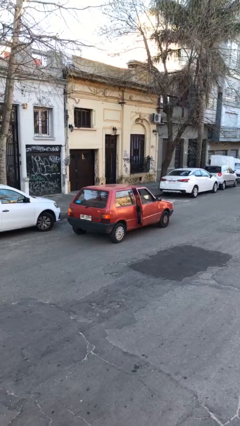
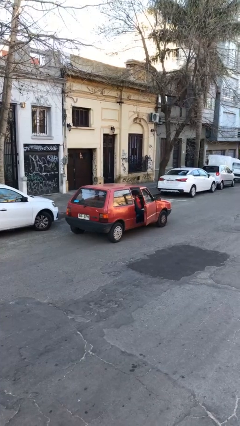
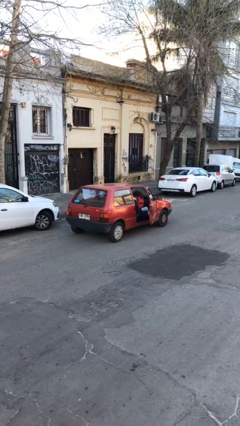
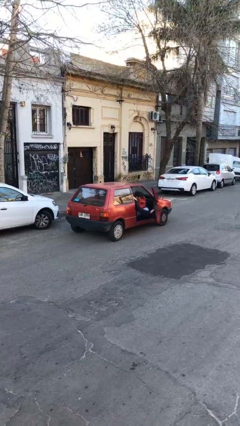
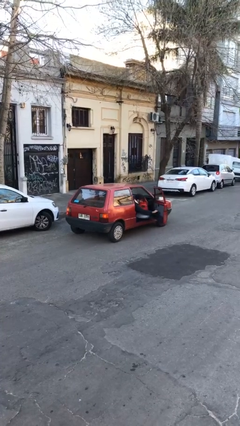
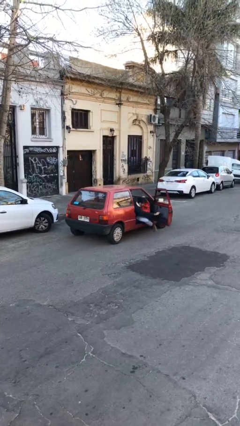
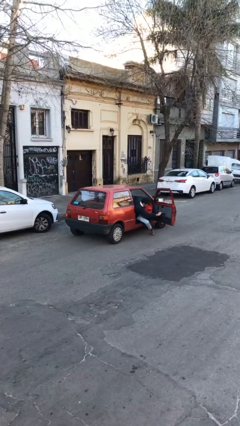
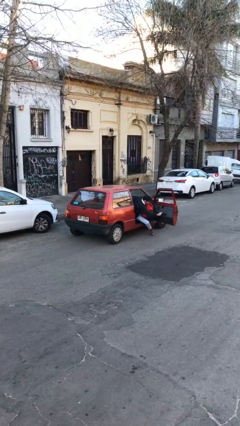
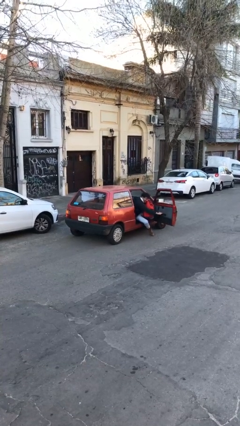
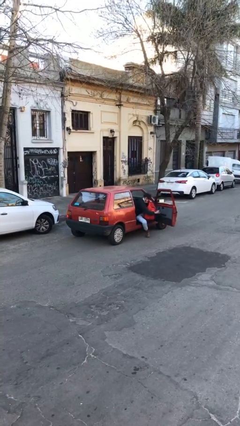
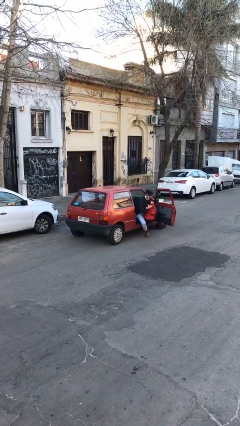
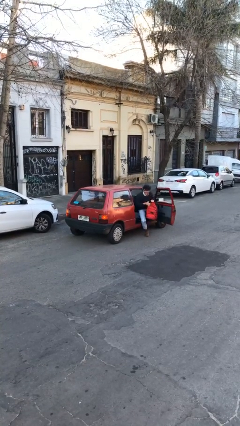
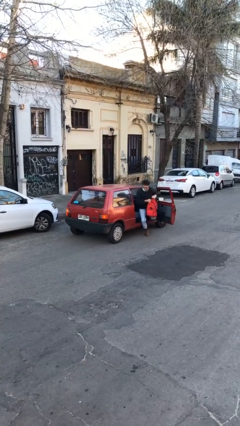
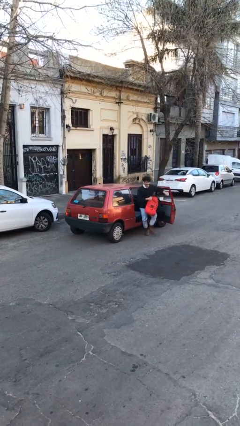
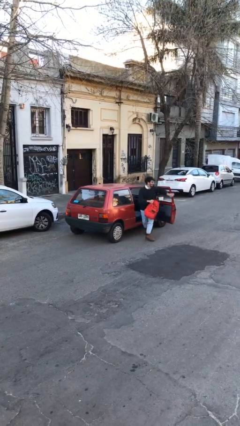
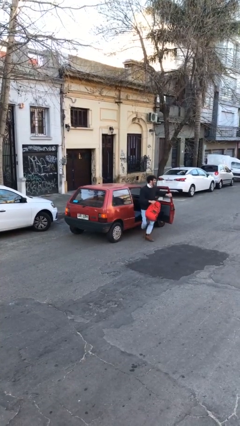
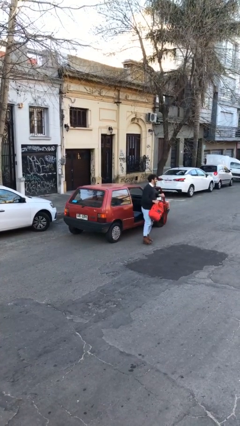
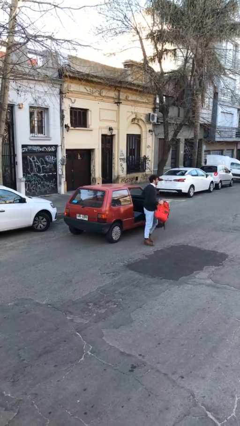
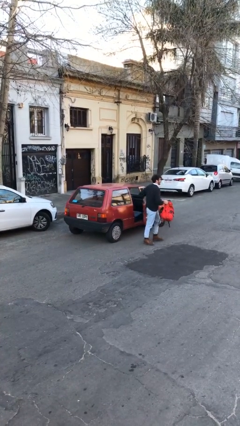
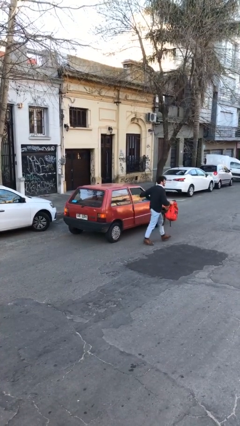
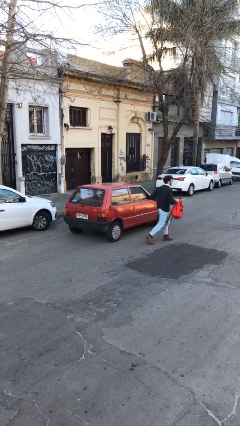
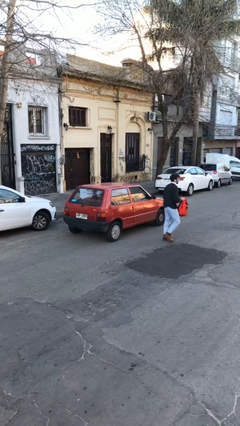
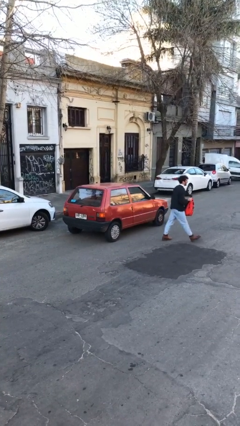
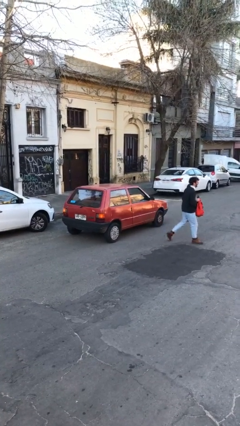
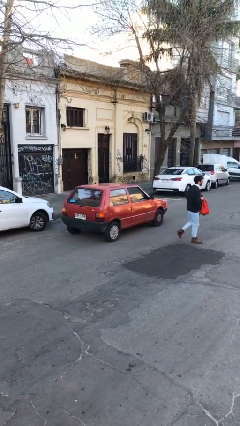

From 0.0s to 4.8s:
car drops off person

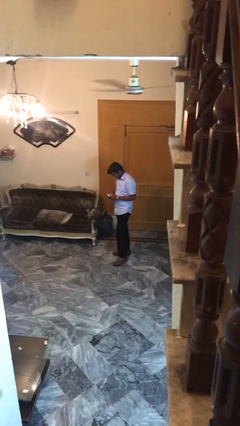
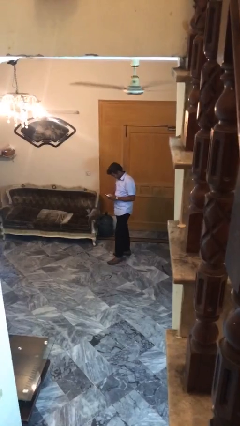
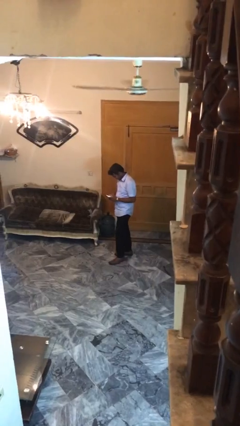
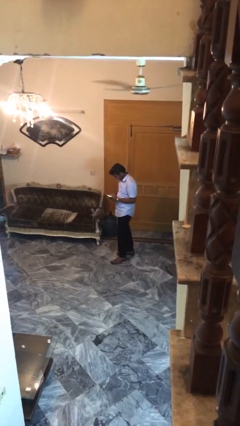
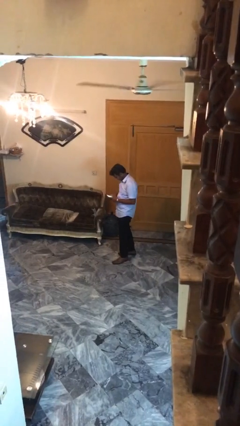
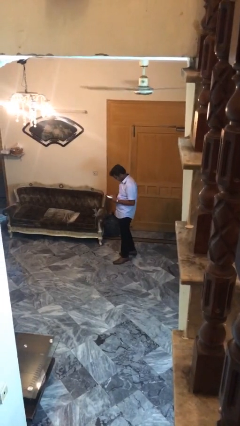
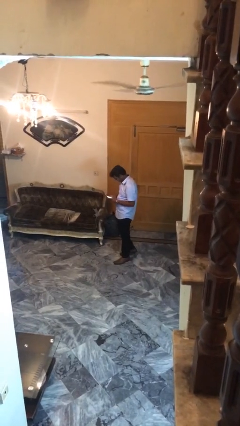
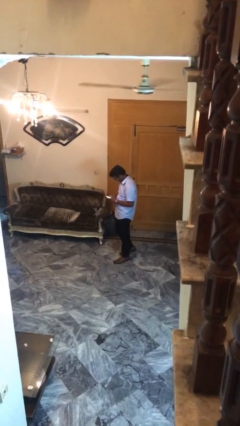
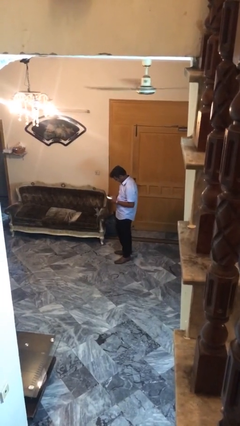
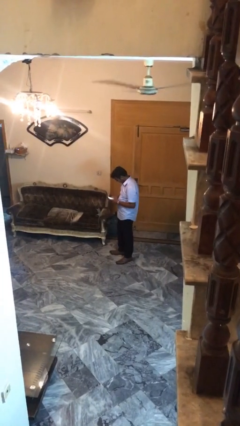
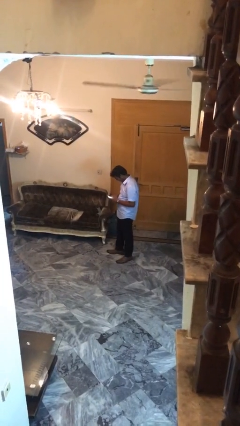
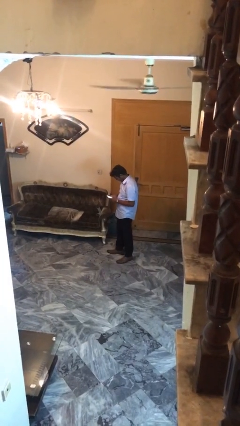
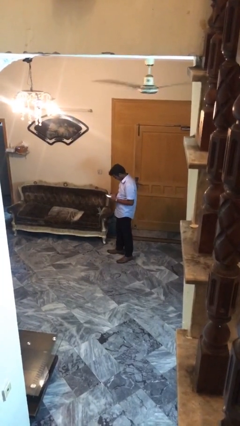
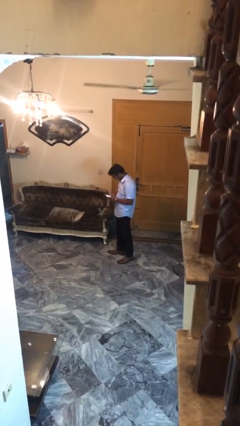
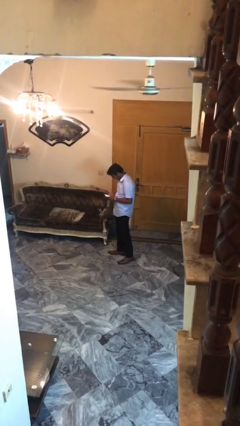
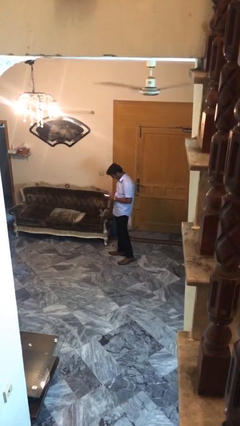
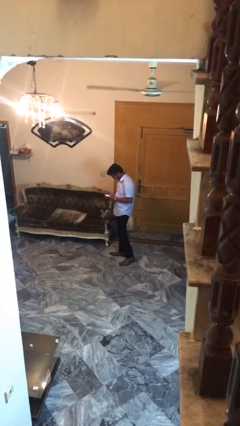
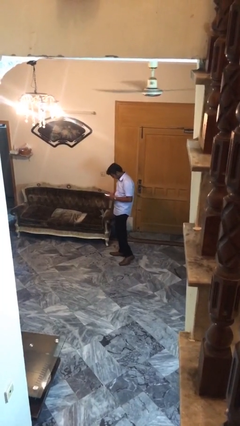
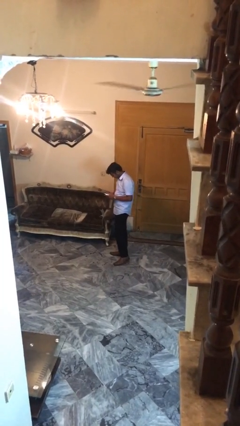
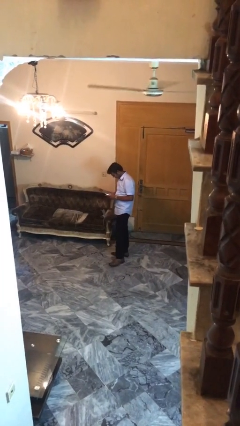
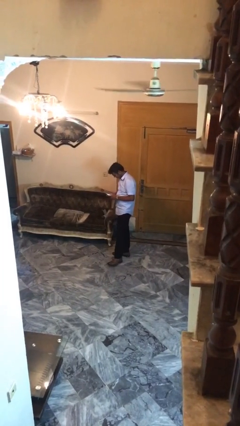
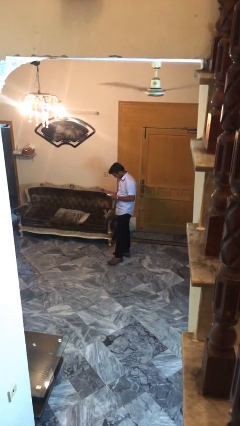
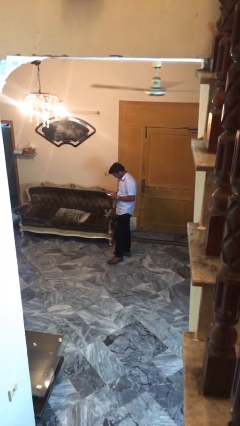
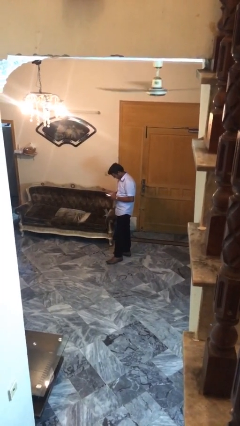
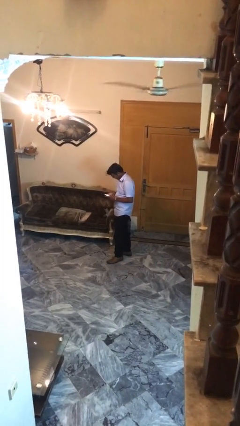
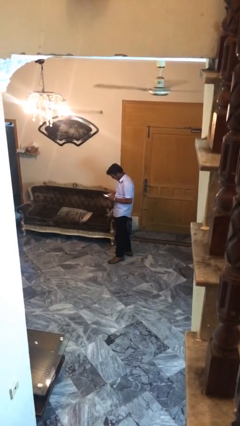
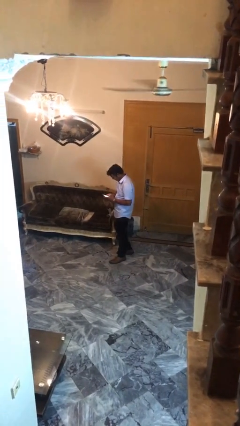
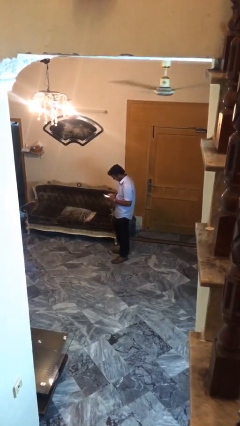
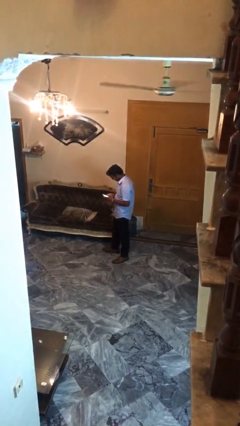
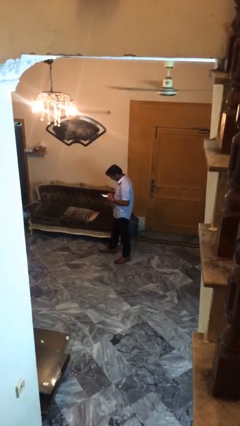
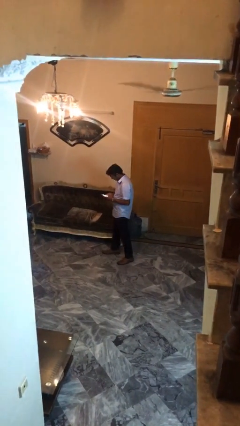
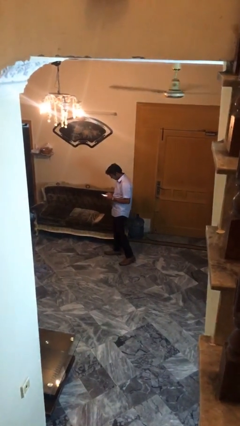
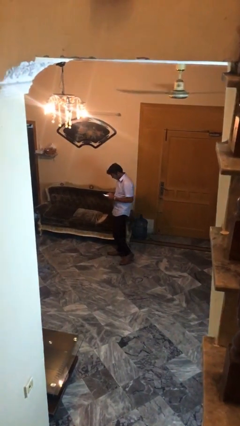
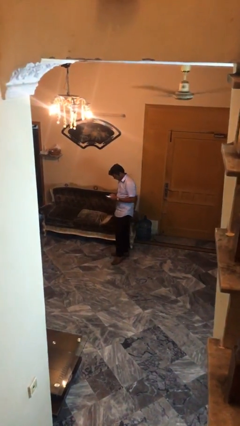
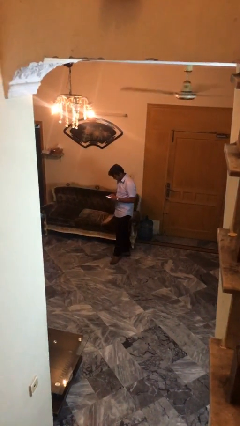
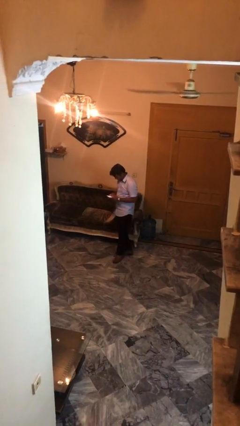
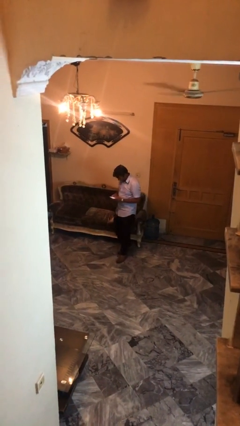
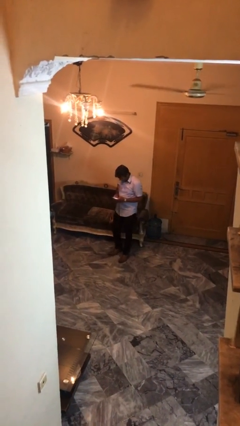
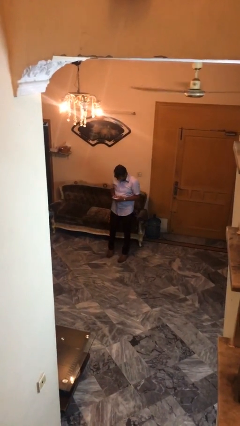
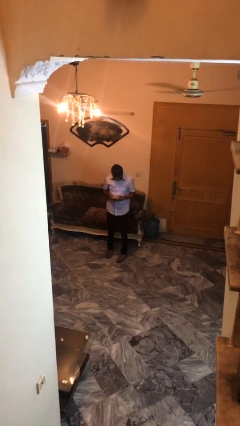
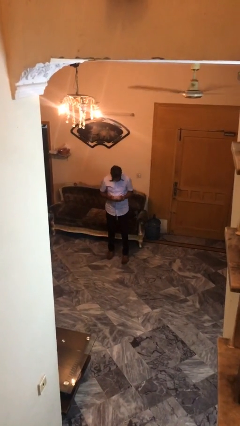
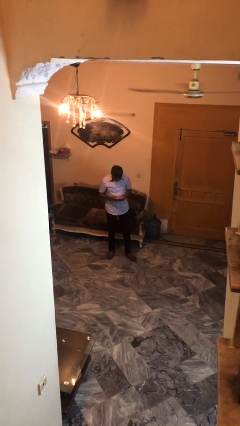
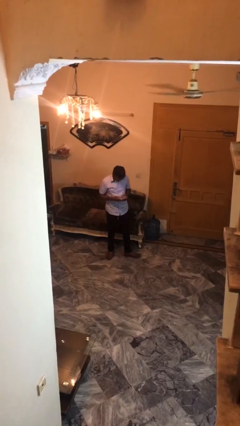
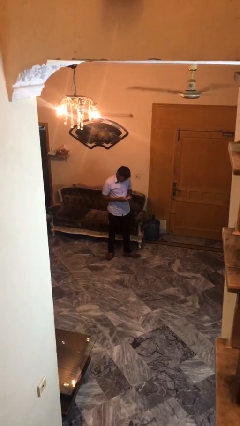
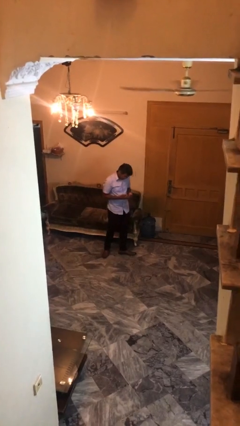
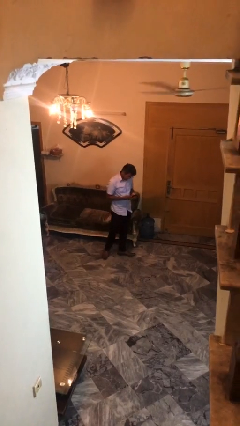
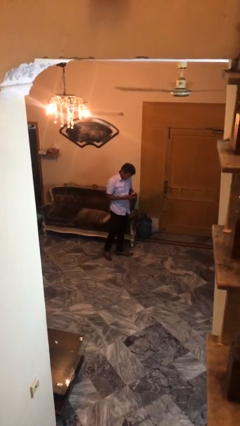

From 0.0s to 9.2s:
person texts on phone

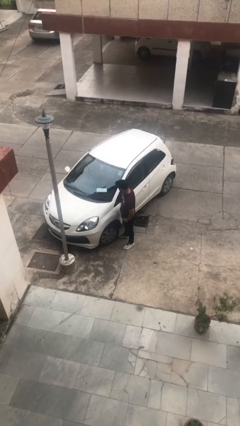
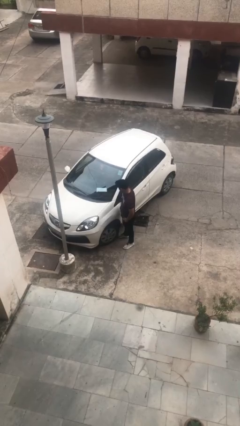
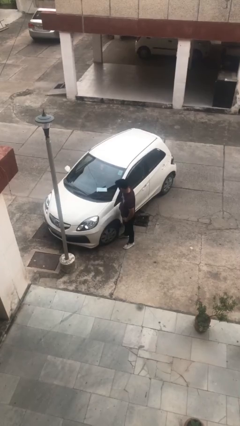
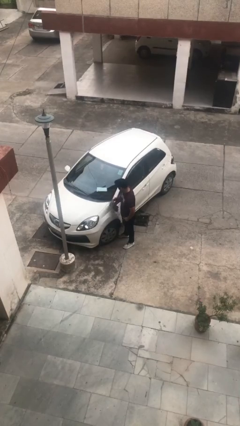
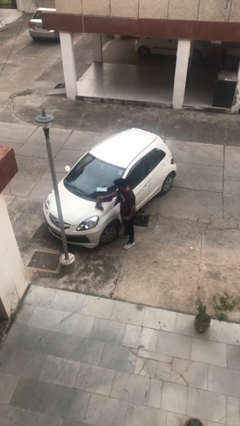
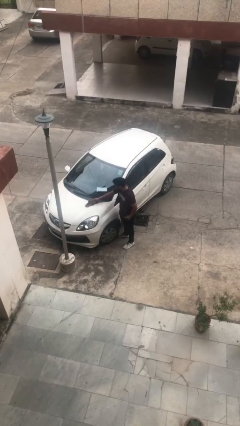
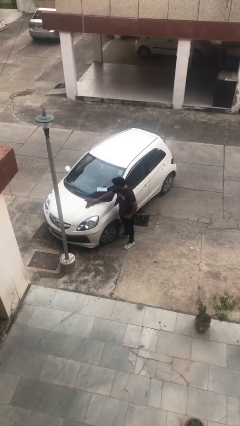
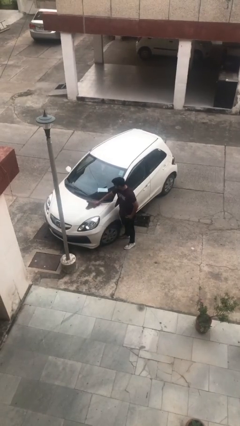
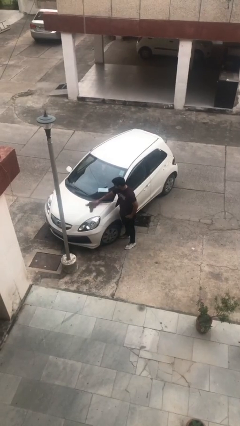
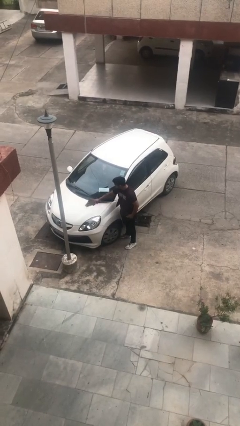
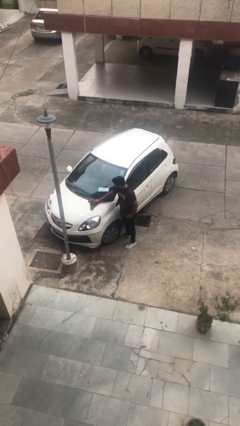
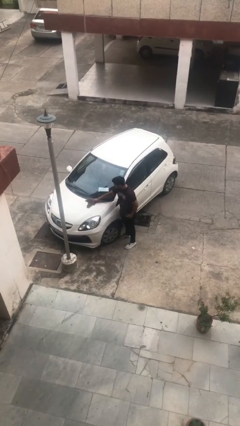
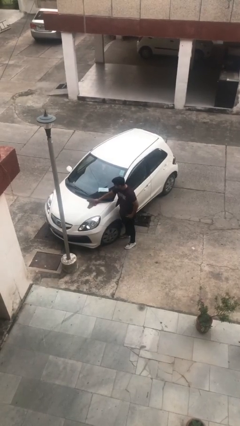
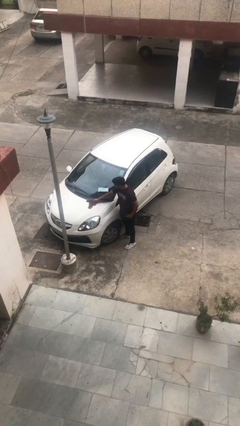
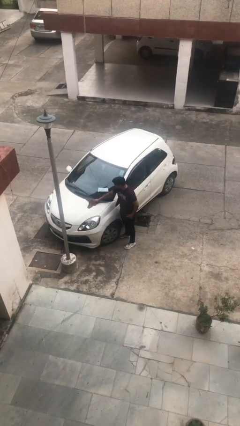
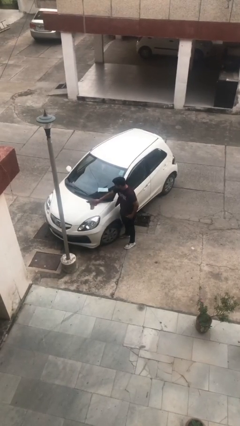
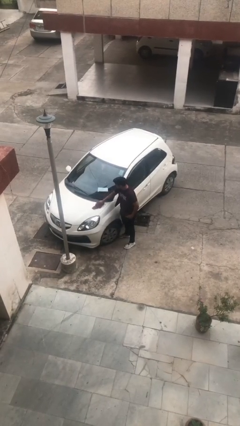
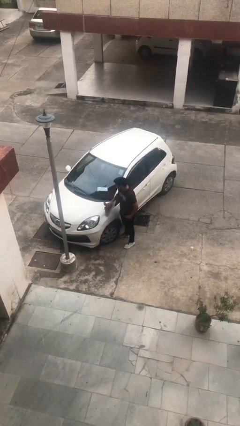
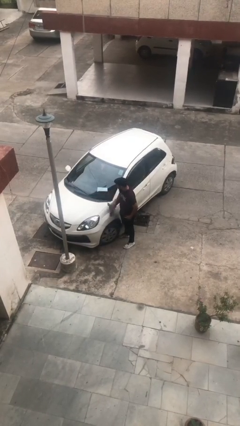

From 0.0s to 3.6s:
person polishes car with rag

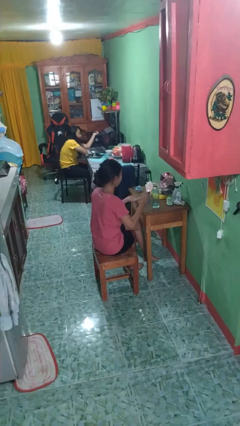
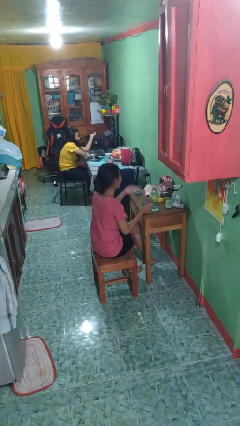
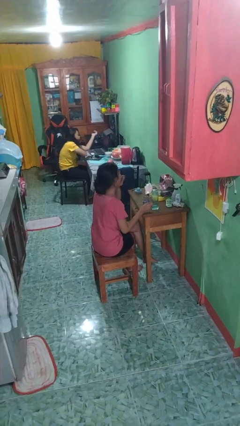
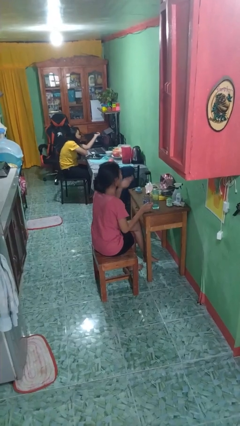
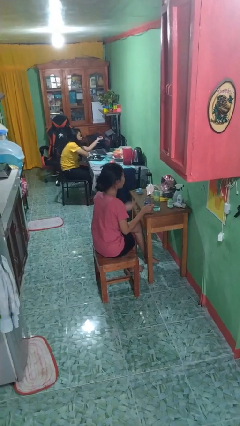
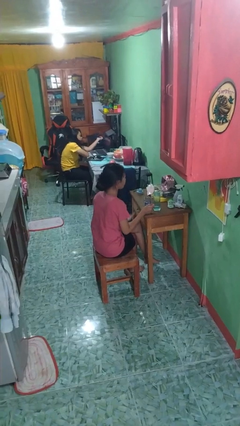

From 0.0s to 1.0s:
person takes medicine pills
